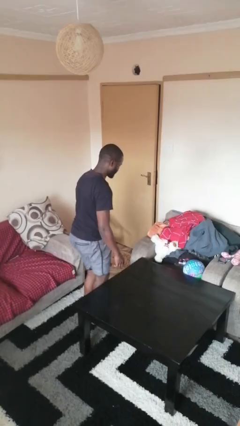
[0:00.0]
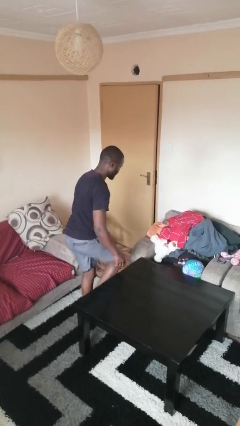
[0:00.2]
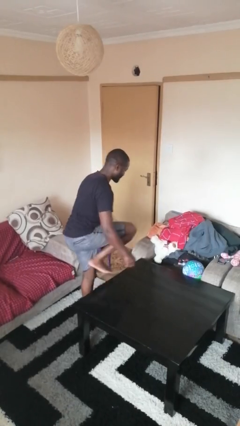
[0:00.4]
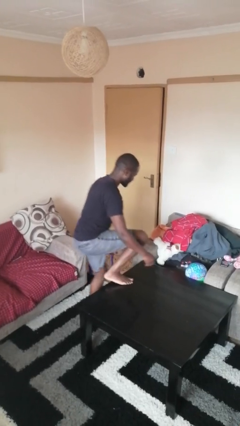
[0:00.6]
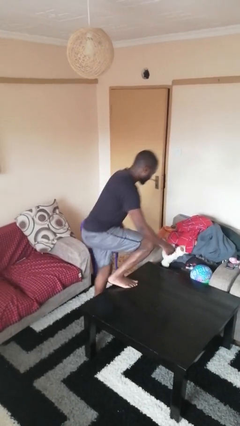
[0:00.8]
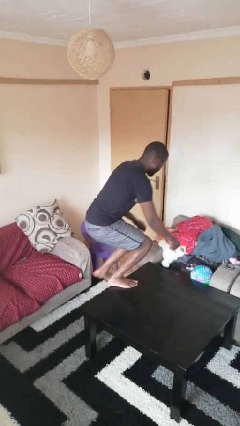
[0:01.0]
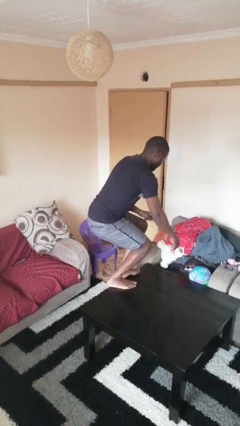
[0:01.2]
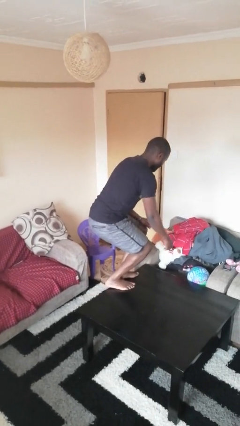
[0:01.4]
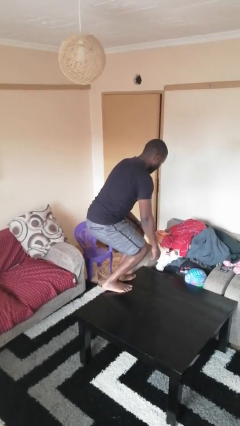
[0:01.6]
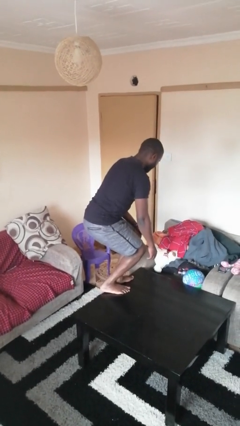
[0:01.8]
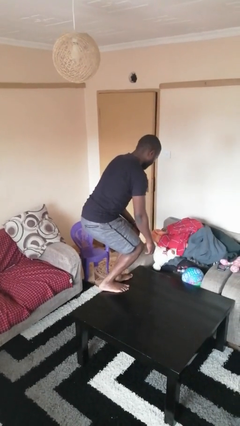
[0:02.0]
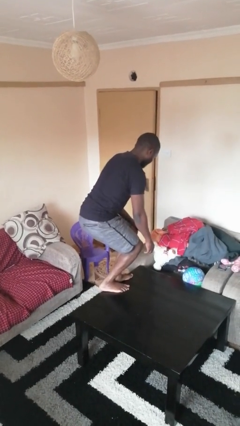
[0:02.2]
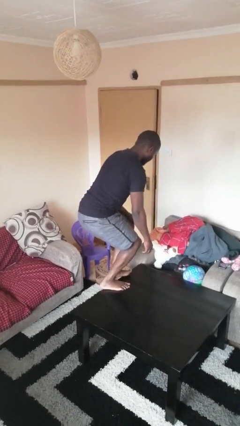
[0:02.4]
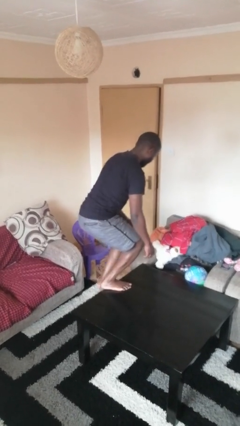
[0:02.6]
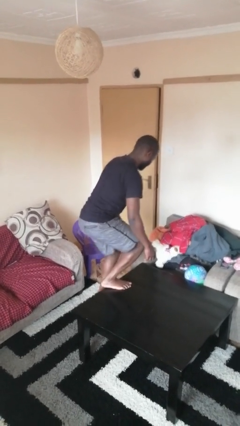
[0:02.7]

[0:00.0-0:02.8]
person climbs on table

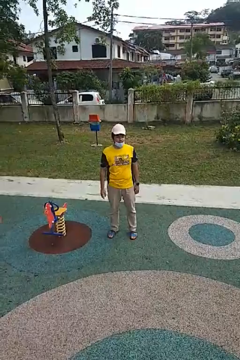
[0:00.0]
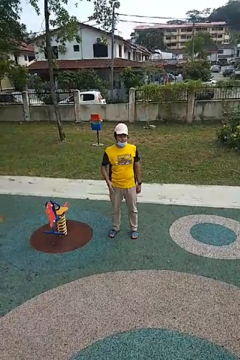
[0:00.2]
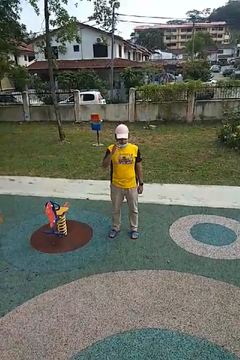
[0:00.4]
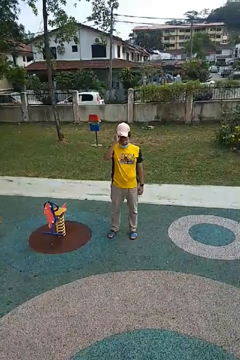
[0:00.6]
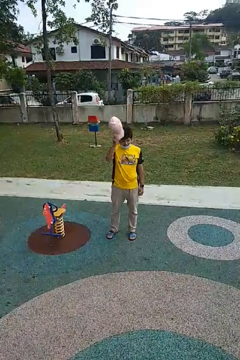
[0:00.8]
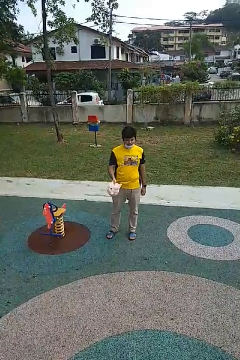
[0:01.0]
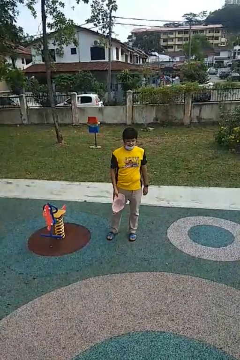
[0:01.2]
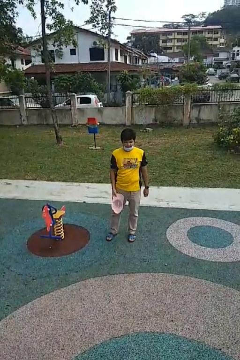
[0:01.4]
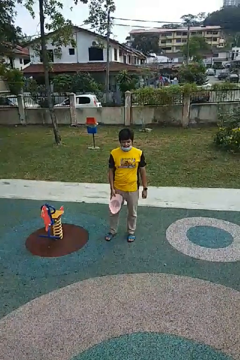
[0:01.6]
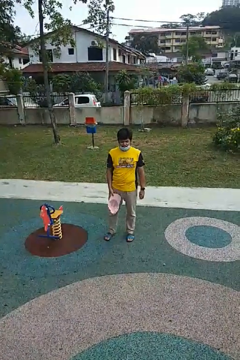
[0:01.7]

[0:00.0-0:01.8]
person takes off hat

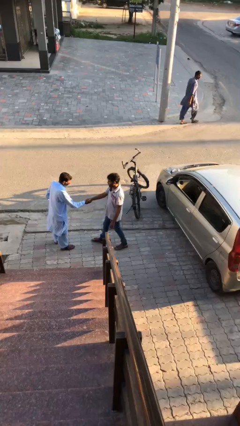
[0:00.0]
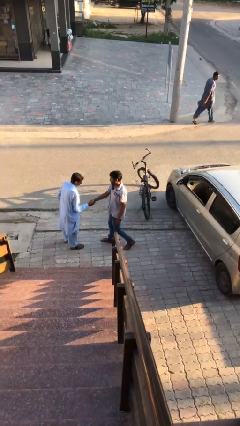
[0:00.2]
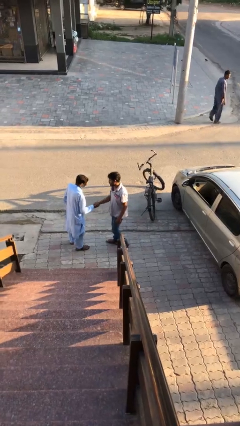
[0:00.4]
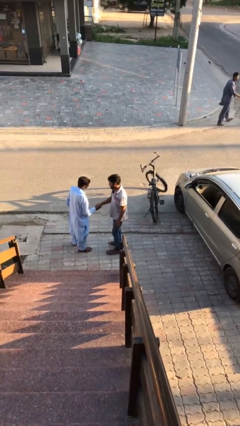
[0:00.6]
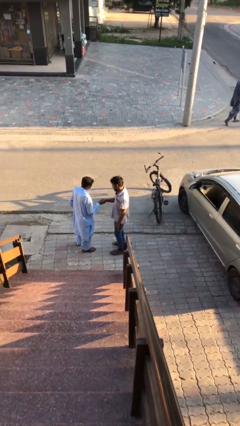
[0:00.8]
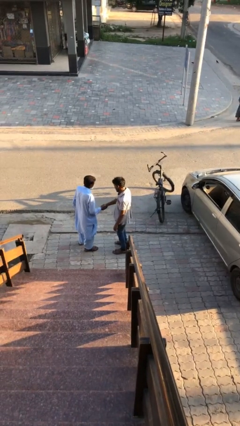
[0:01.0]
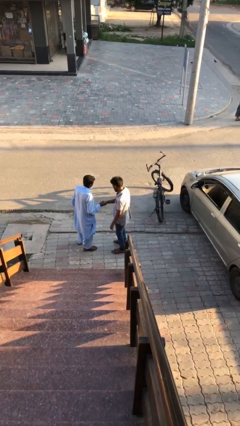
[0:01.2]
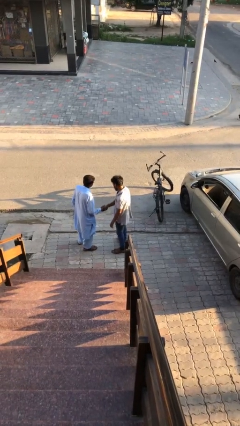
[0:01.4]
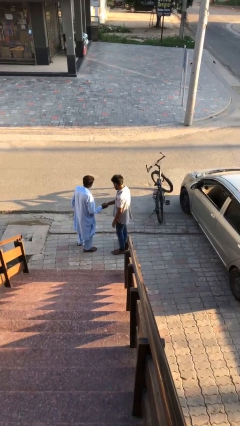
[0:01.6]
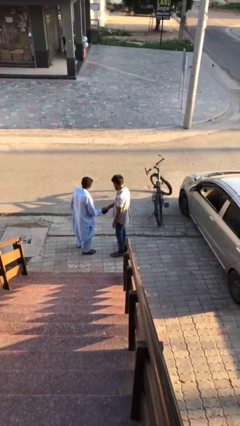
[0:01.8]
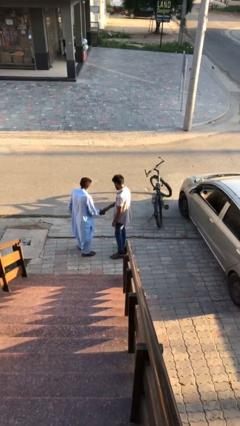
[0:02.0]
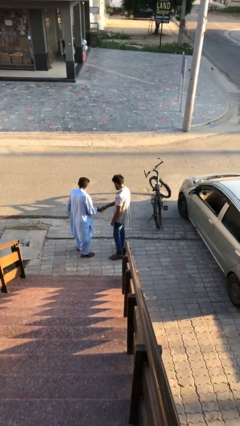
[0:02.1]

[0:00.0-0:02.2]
person shakes hand

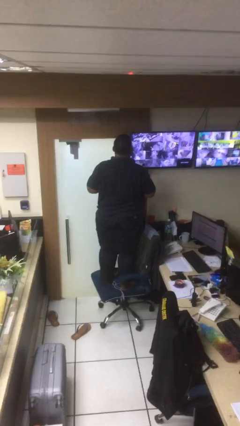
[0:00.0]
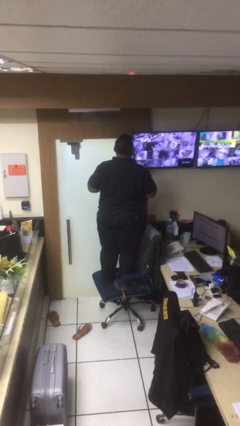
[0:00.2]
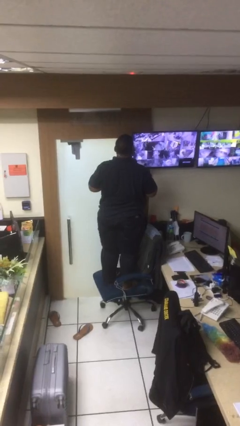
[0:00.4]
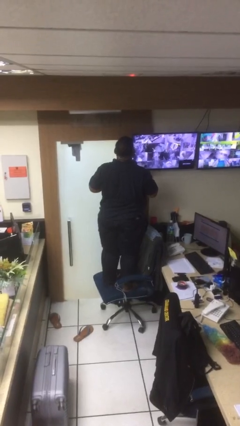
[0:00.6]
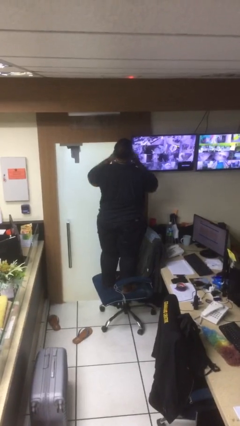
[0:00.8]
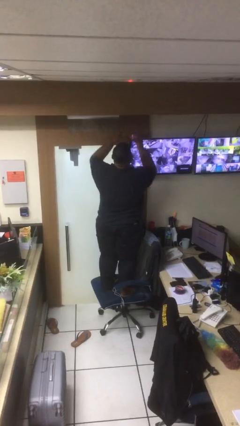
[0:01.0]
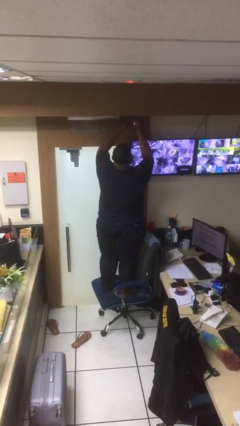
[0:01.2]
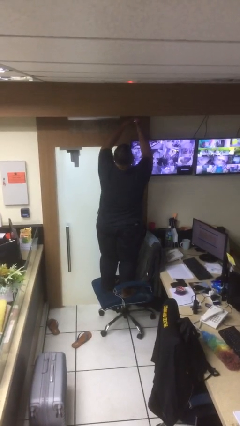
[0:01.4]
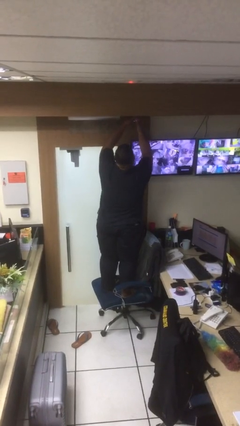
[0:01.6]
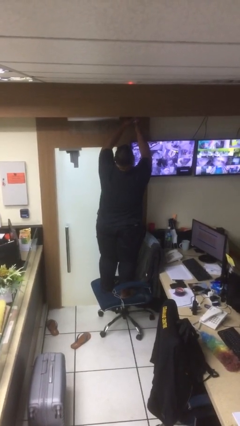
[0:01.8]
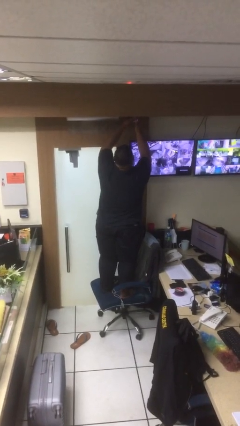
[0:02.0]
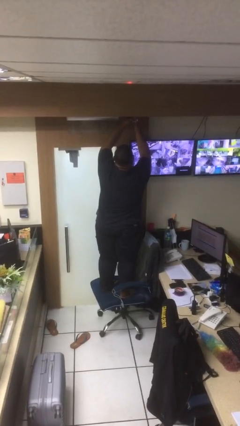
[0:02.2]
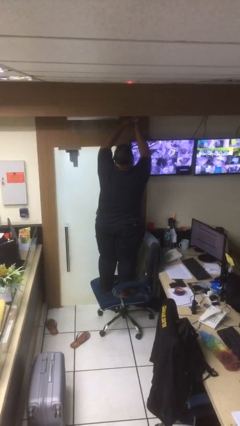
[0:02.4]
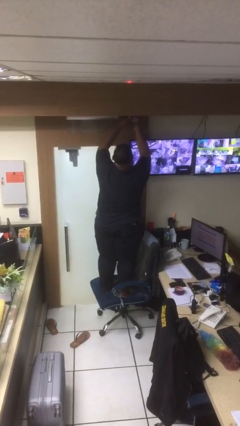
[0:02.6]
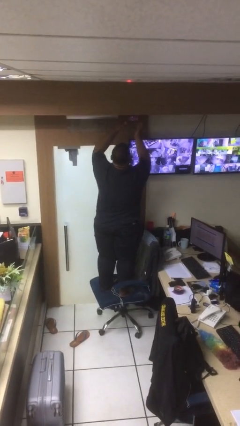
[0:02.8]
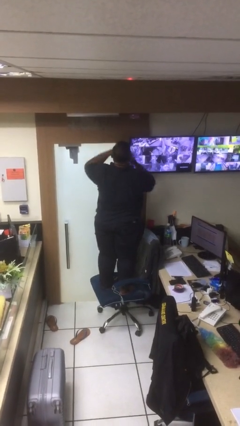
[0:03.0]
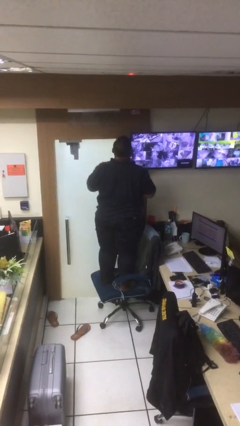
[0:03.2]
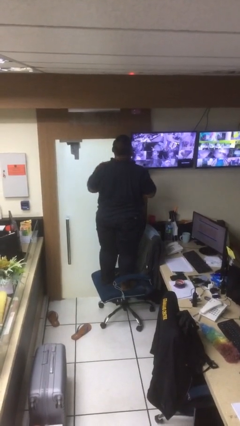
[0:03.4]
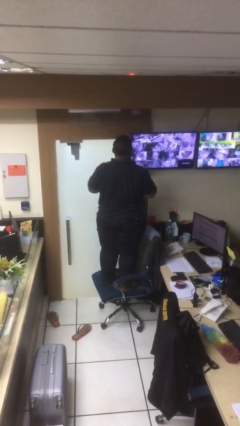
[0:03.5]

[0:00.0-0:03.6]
person puts up smoke detector

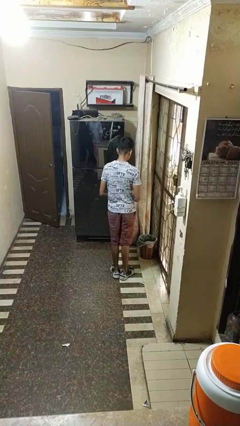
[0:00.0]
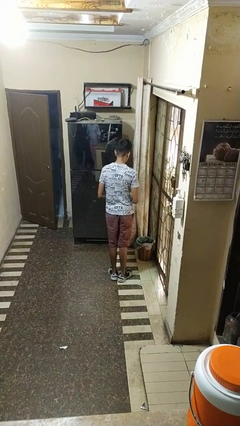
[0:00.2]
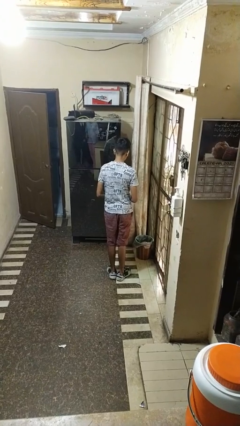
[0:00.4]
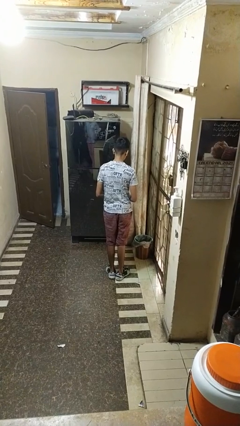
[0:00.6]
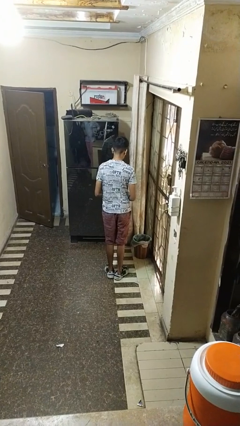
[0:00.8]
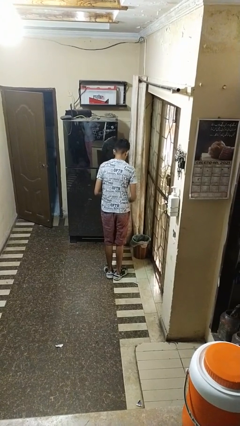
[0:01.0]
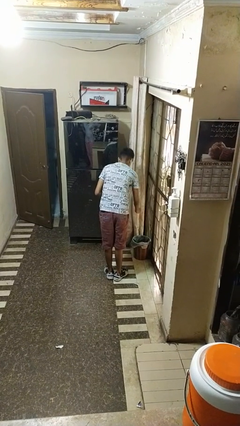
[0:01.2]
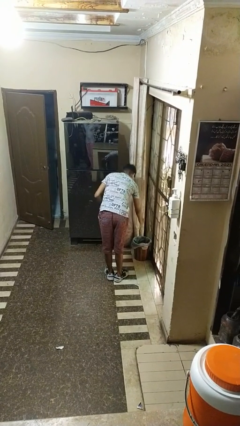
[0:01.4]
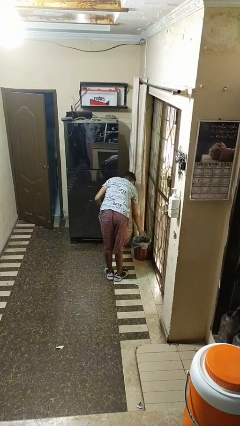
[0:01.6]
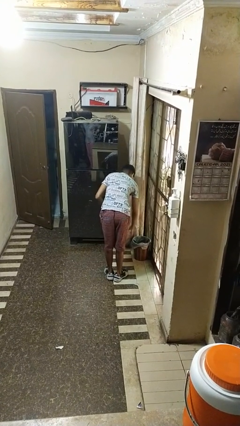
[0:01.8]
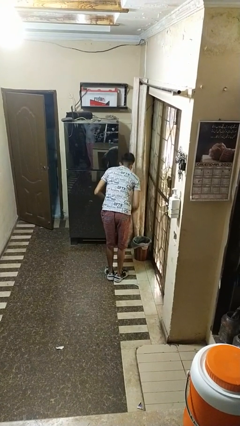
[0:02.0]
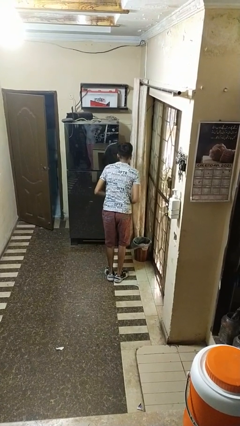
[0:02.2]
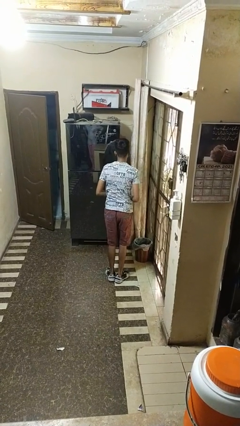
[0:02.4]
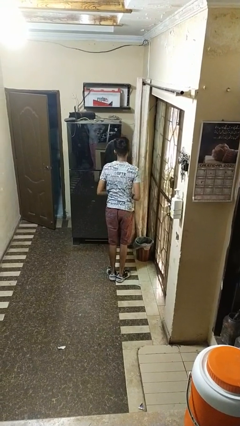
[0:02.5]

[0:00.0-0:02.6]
person discards trash

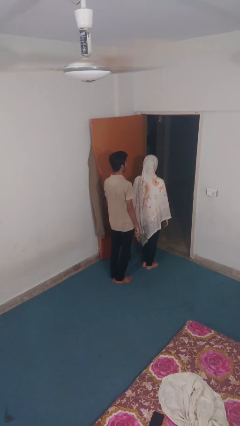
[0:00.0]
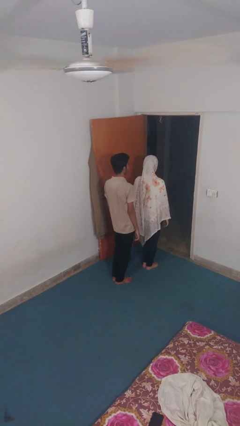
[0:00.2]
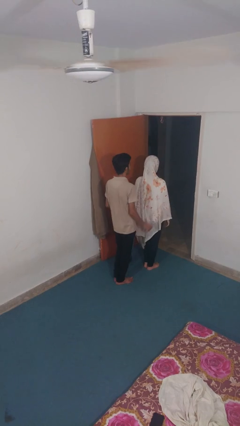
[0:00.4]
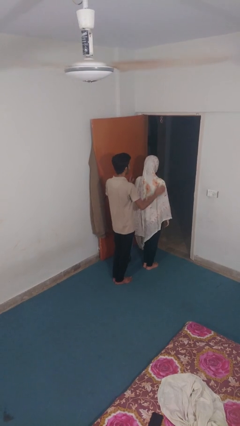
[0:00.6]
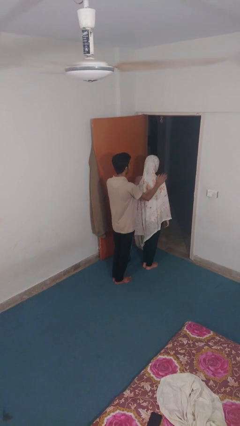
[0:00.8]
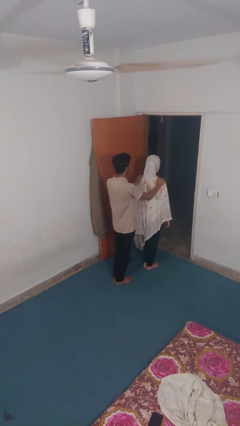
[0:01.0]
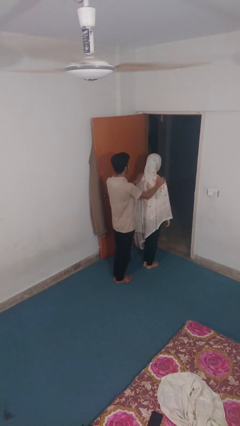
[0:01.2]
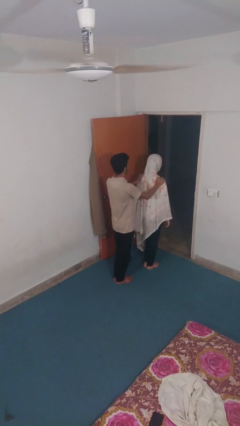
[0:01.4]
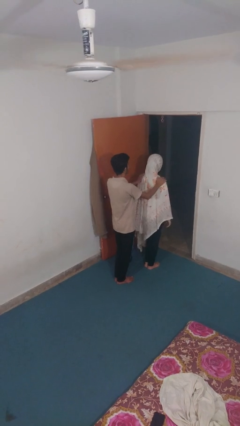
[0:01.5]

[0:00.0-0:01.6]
person grabs person by shoulder

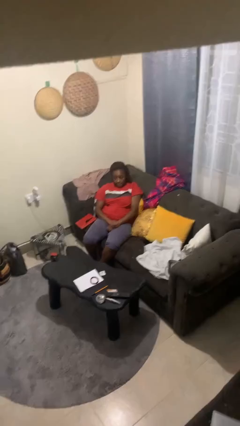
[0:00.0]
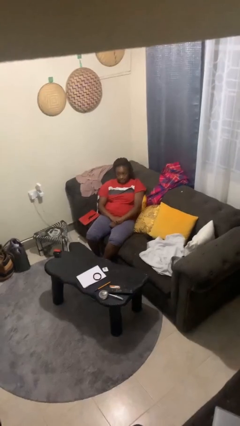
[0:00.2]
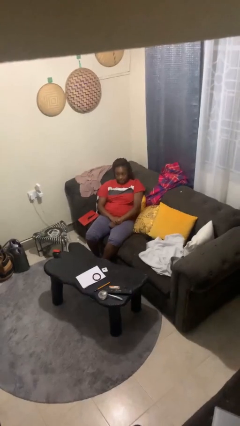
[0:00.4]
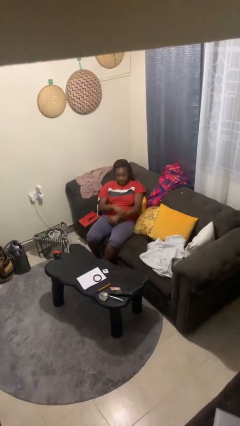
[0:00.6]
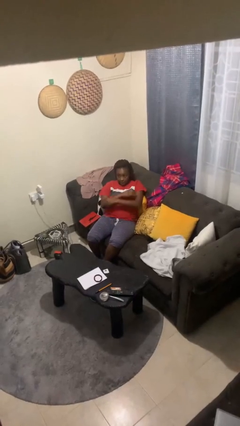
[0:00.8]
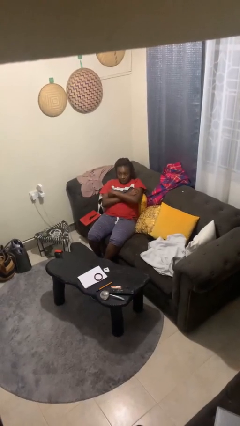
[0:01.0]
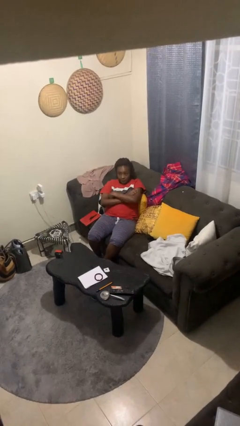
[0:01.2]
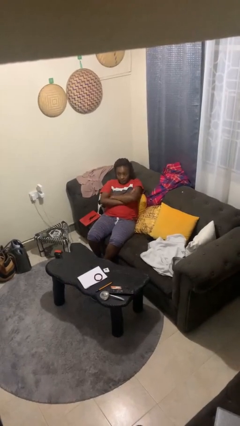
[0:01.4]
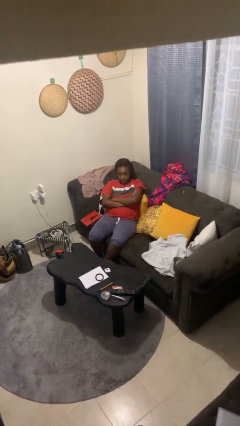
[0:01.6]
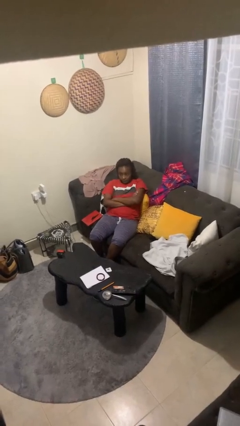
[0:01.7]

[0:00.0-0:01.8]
person crosses arms

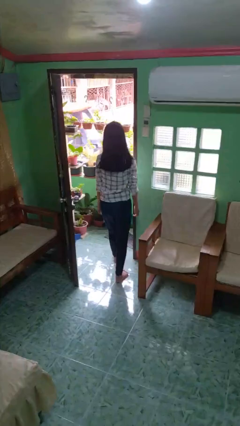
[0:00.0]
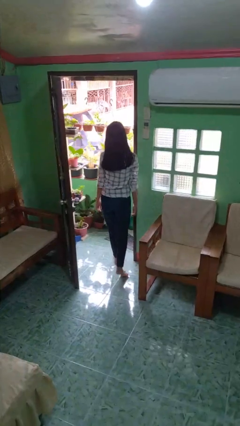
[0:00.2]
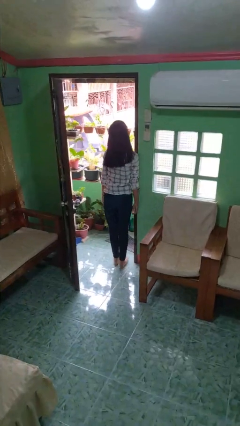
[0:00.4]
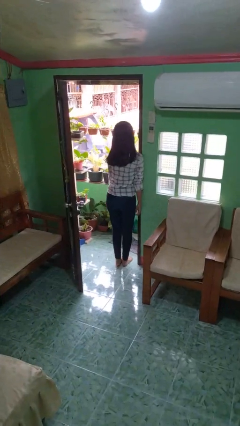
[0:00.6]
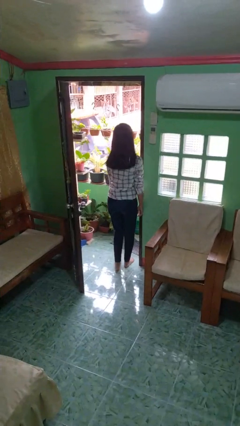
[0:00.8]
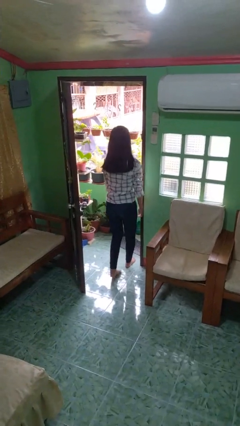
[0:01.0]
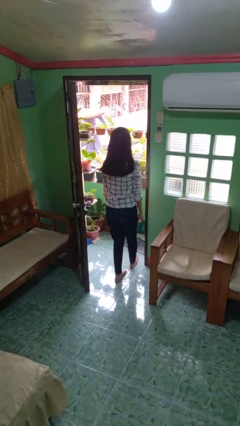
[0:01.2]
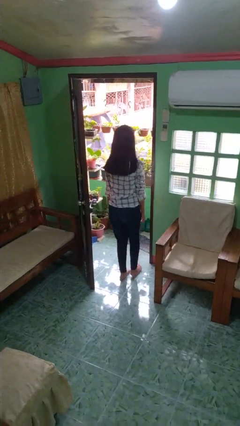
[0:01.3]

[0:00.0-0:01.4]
person bumps into wall
